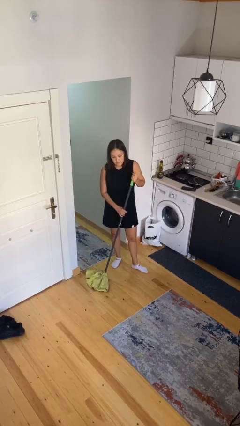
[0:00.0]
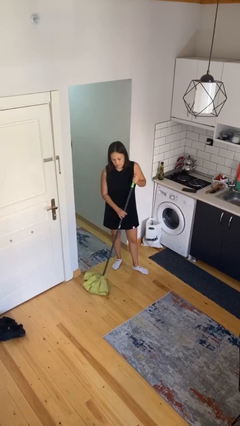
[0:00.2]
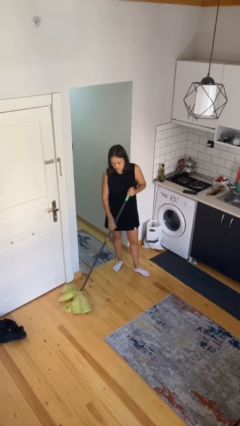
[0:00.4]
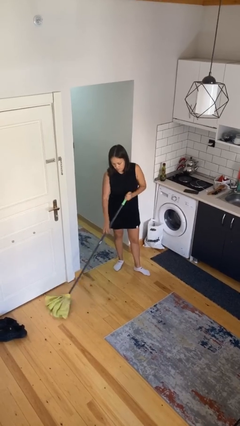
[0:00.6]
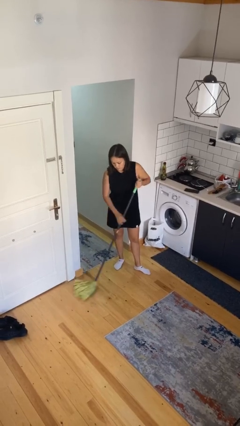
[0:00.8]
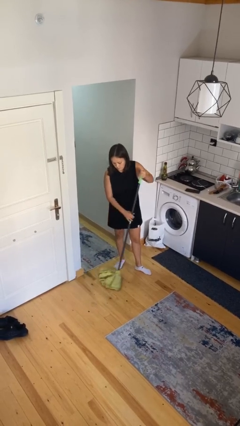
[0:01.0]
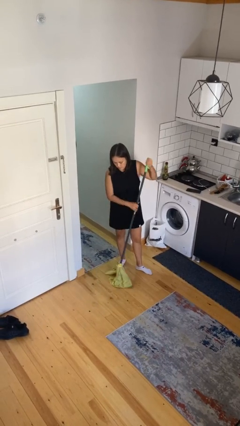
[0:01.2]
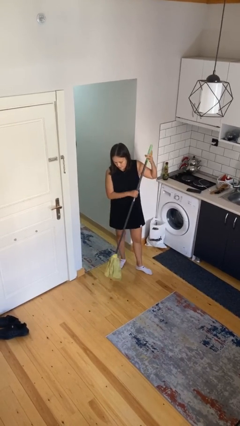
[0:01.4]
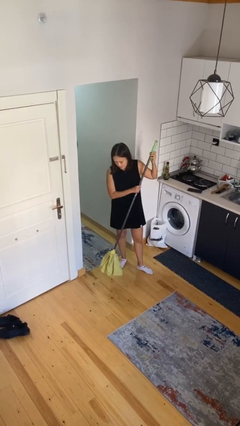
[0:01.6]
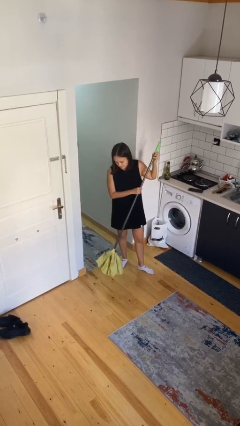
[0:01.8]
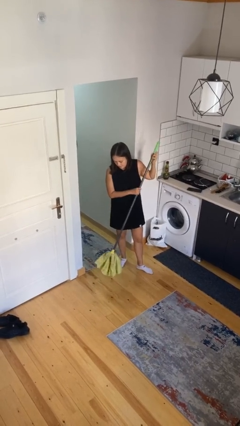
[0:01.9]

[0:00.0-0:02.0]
person sweeps floor

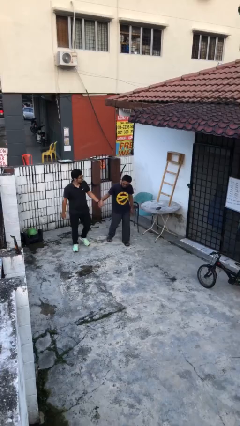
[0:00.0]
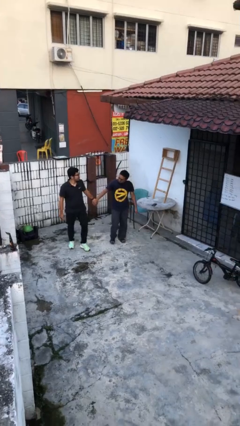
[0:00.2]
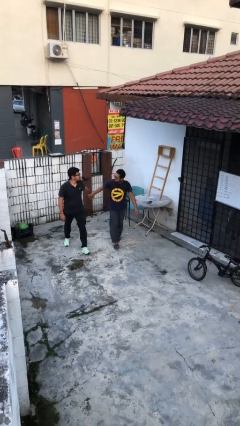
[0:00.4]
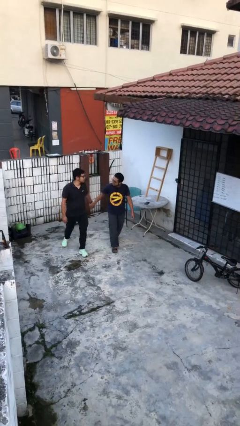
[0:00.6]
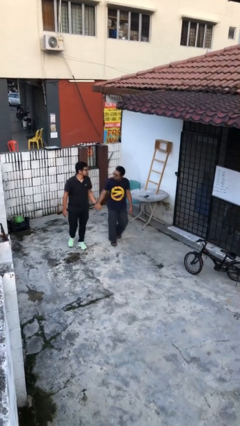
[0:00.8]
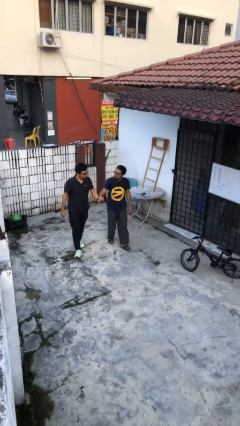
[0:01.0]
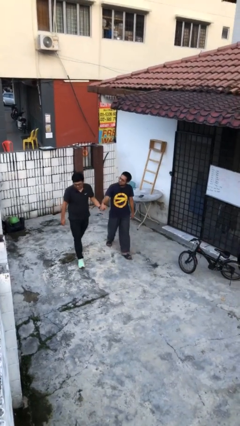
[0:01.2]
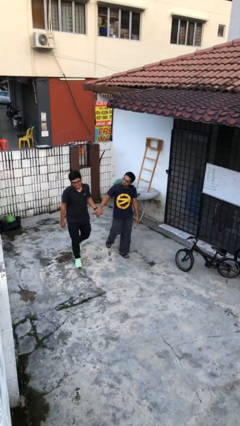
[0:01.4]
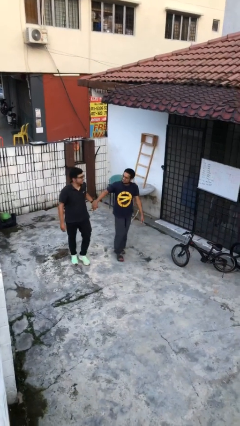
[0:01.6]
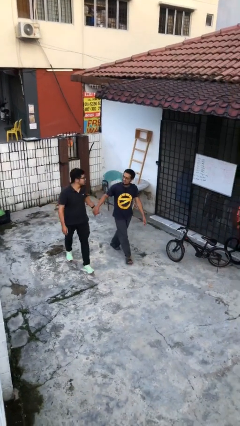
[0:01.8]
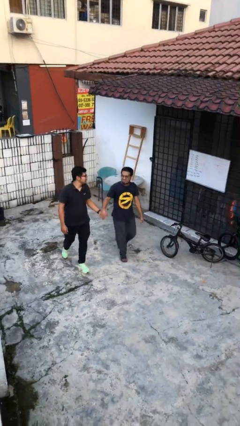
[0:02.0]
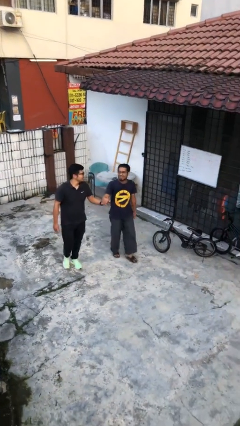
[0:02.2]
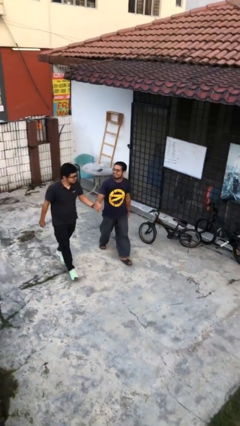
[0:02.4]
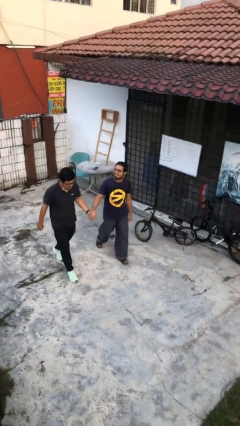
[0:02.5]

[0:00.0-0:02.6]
person holds hand

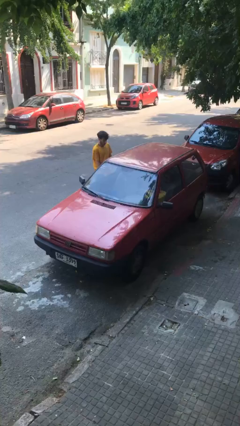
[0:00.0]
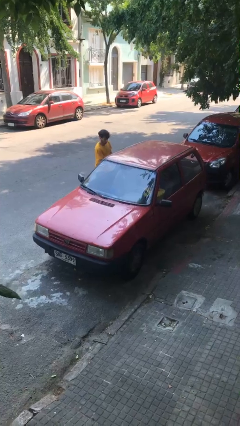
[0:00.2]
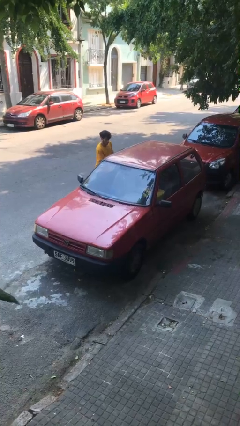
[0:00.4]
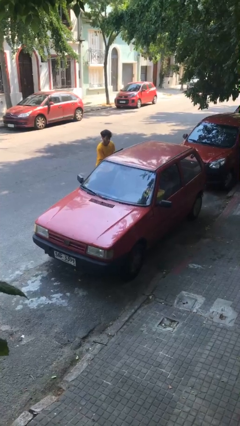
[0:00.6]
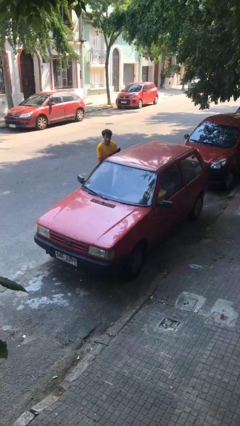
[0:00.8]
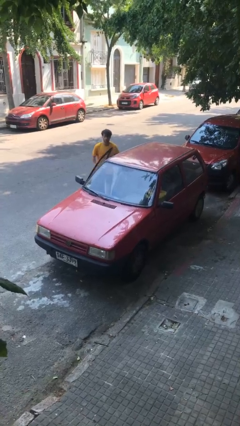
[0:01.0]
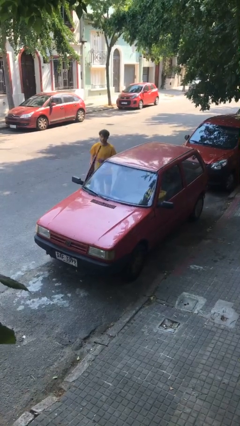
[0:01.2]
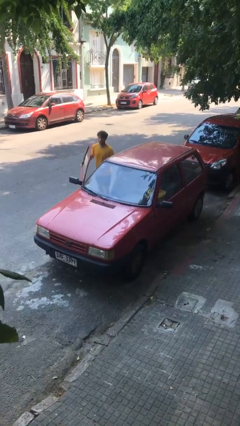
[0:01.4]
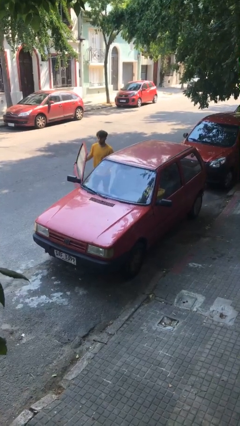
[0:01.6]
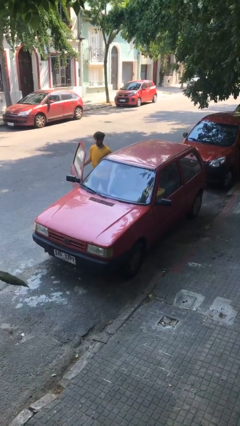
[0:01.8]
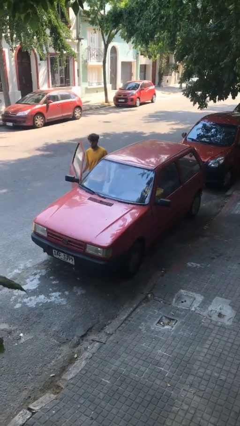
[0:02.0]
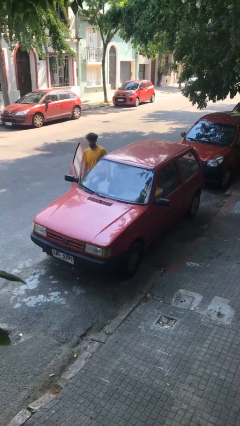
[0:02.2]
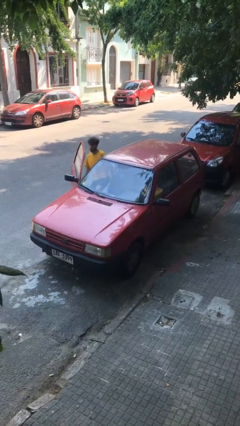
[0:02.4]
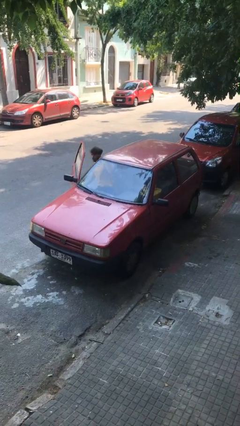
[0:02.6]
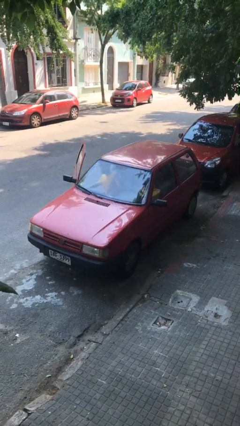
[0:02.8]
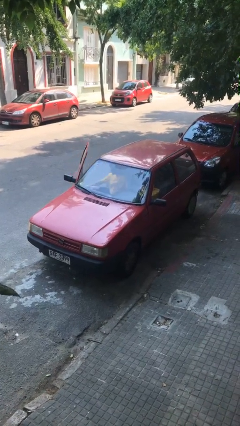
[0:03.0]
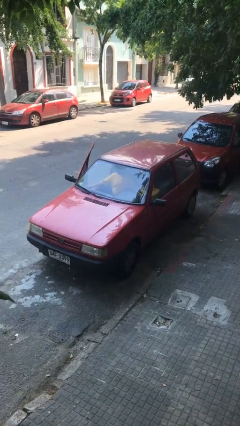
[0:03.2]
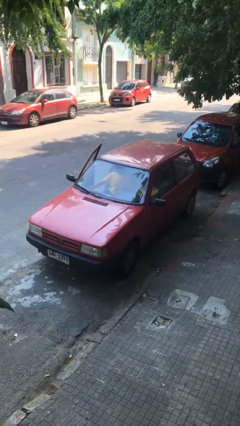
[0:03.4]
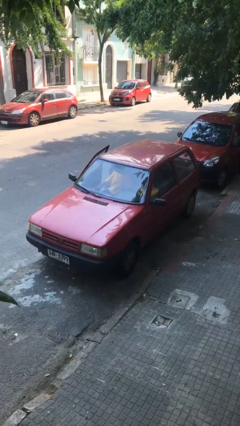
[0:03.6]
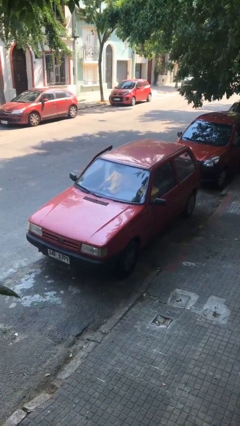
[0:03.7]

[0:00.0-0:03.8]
car picks up person

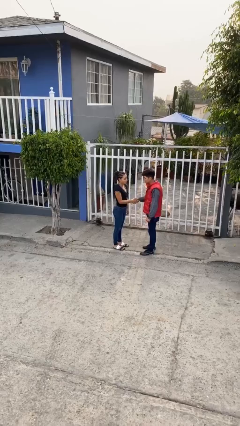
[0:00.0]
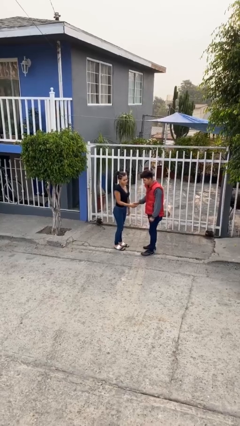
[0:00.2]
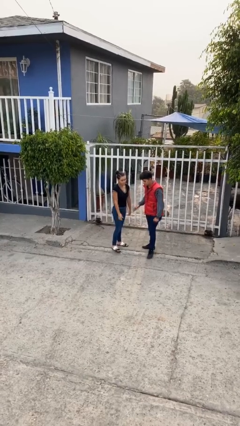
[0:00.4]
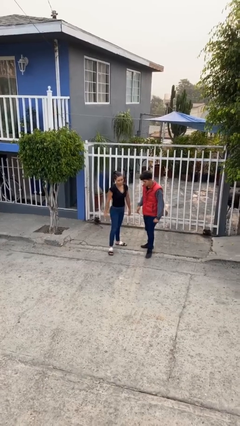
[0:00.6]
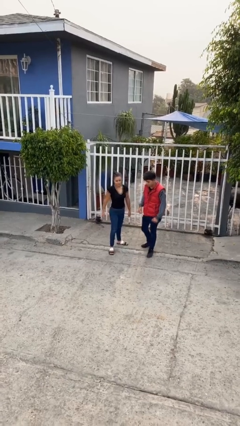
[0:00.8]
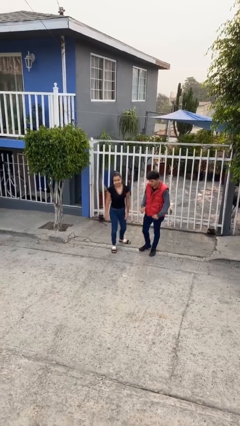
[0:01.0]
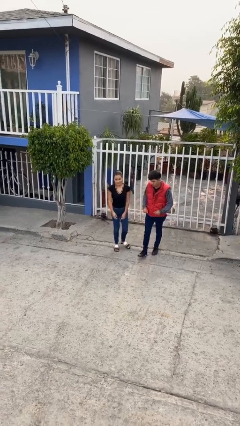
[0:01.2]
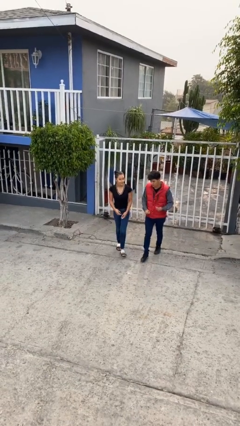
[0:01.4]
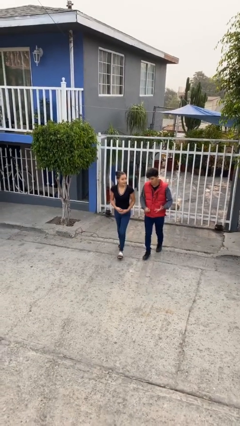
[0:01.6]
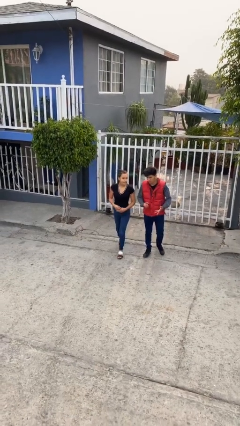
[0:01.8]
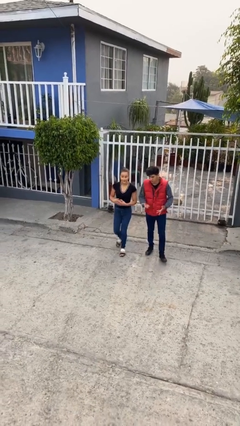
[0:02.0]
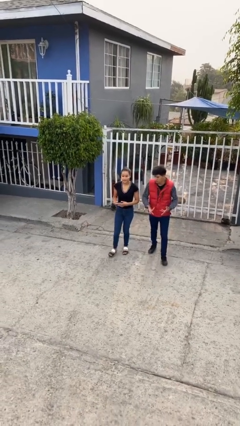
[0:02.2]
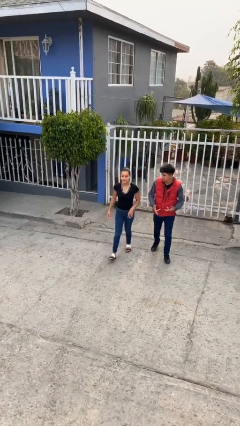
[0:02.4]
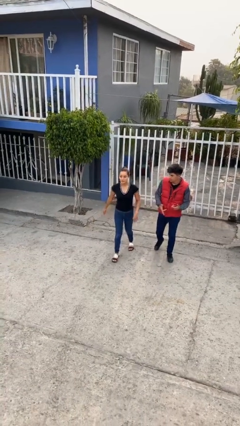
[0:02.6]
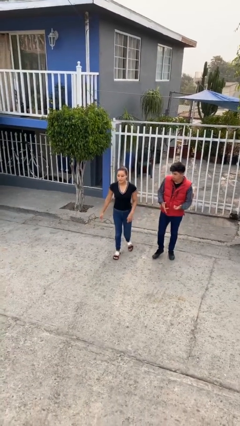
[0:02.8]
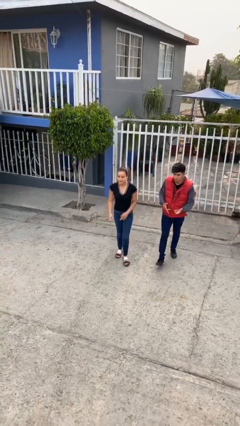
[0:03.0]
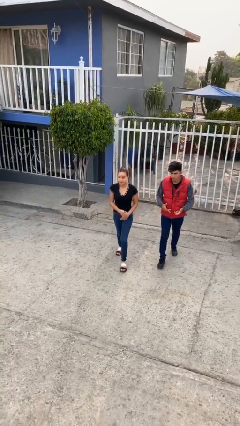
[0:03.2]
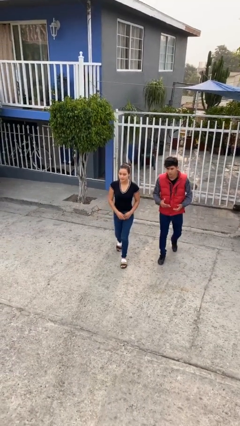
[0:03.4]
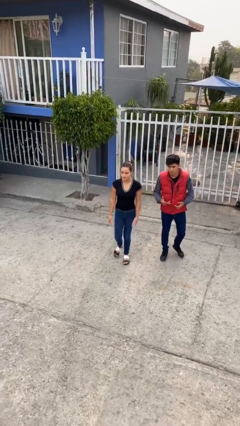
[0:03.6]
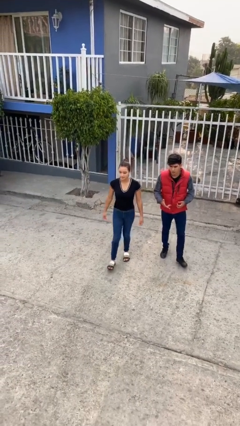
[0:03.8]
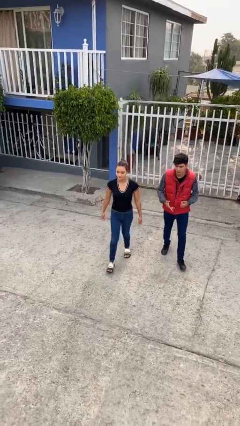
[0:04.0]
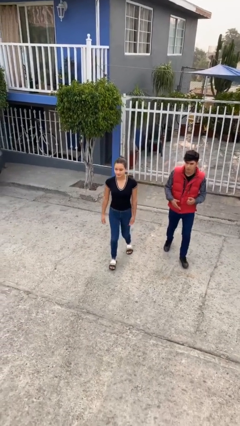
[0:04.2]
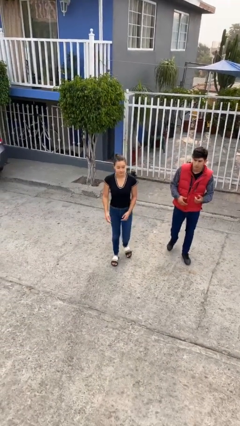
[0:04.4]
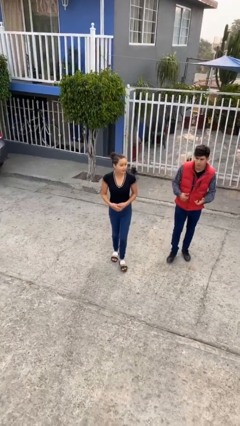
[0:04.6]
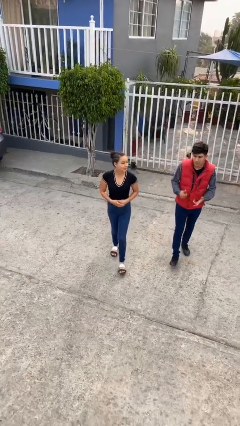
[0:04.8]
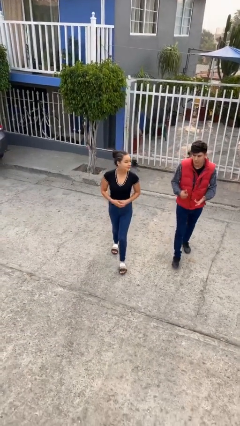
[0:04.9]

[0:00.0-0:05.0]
person talks to person

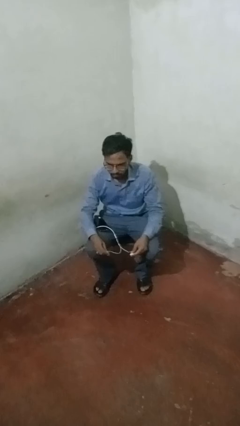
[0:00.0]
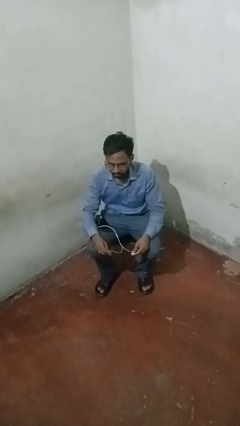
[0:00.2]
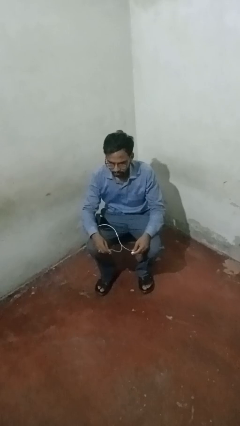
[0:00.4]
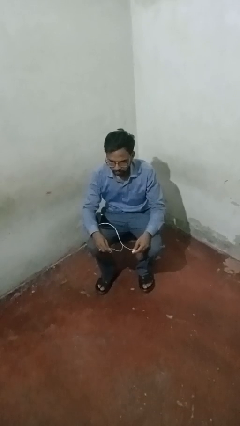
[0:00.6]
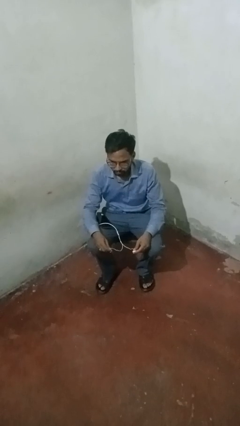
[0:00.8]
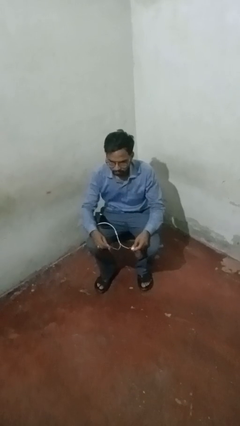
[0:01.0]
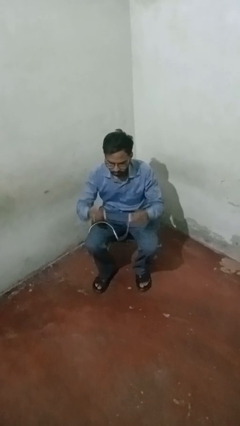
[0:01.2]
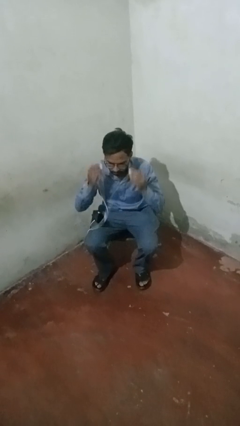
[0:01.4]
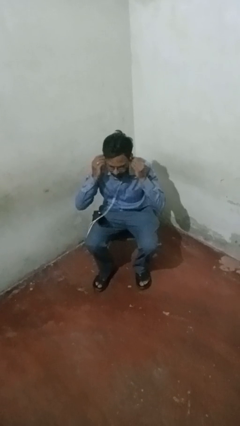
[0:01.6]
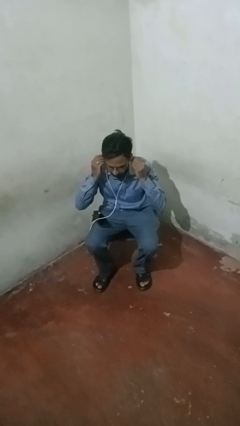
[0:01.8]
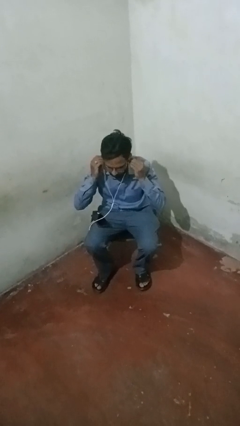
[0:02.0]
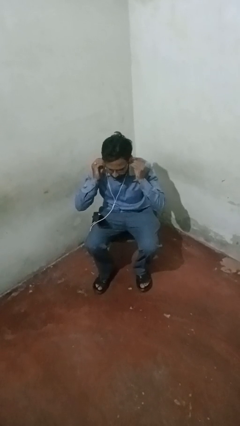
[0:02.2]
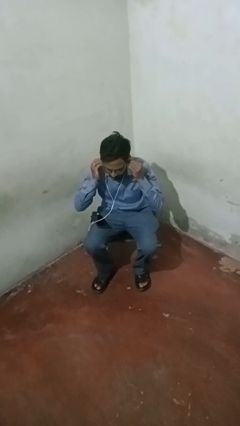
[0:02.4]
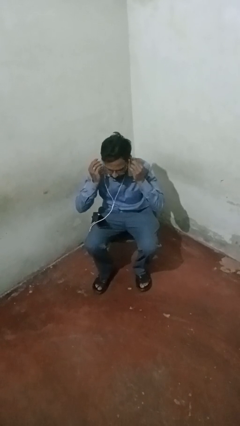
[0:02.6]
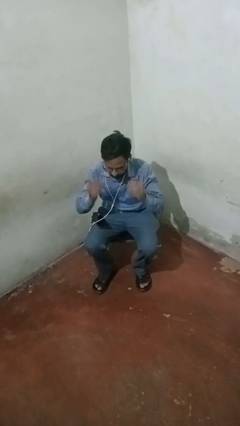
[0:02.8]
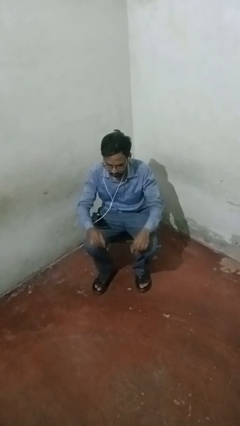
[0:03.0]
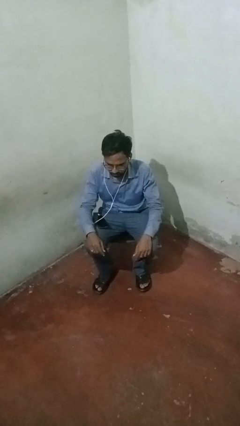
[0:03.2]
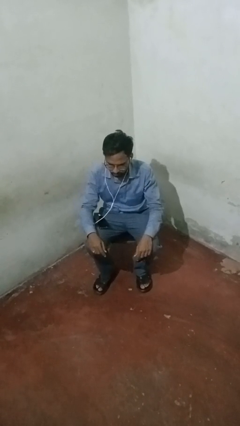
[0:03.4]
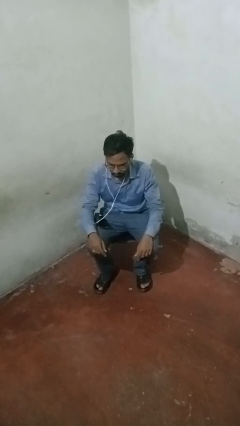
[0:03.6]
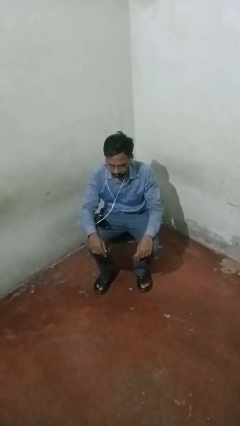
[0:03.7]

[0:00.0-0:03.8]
person puts on headphones

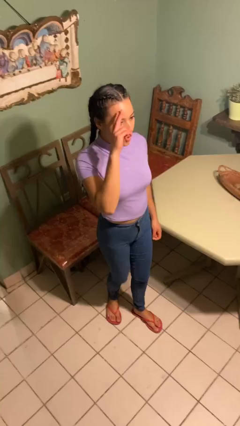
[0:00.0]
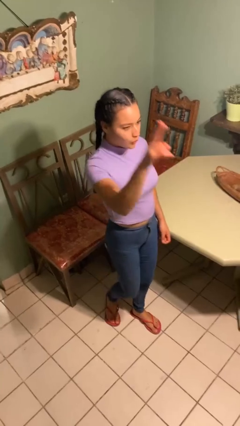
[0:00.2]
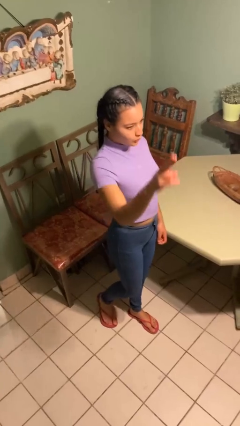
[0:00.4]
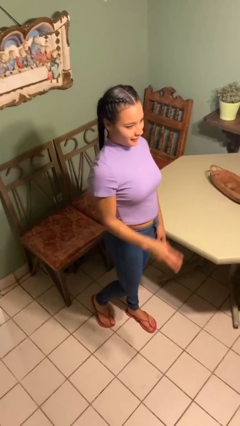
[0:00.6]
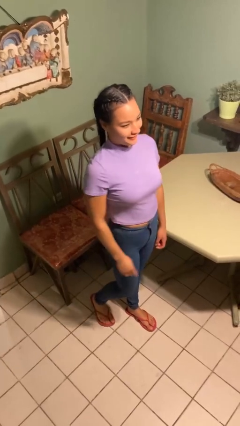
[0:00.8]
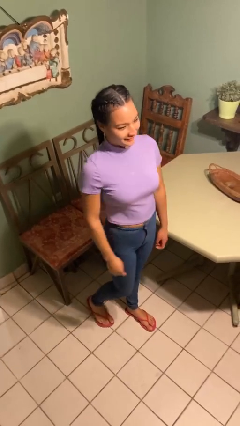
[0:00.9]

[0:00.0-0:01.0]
person salutes
